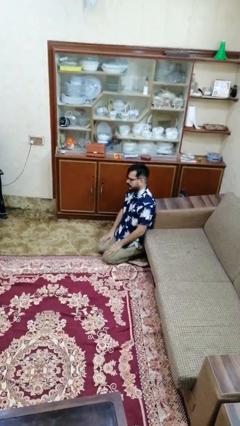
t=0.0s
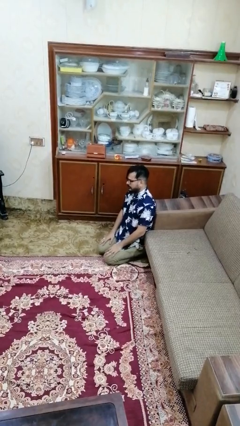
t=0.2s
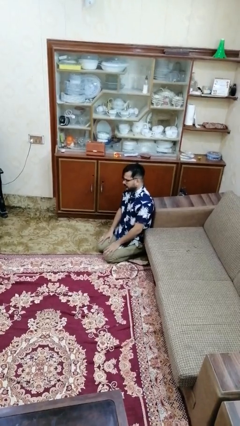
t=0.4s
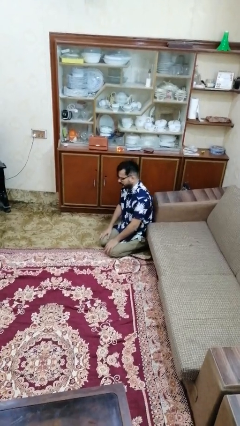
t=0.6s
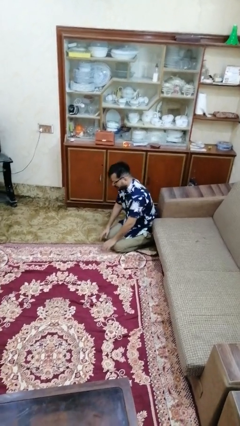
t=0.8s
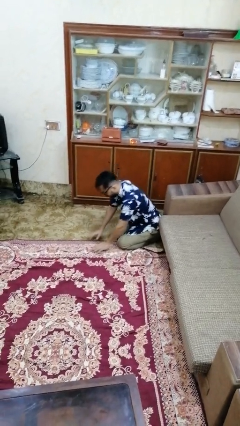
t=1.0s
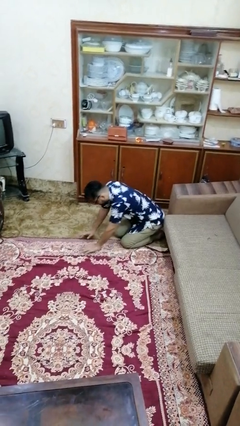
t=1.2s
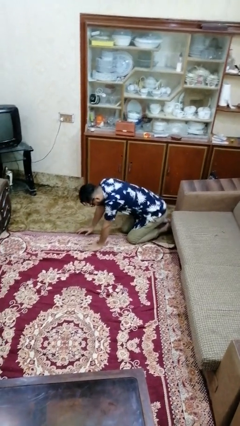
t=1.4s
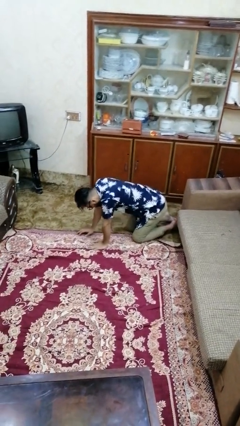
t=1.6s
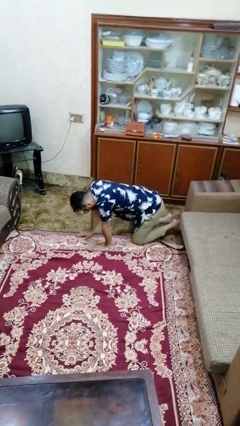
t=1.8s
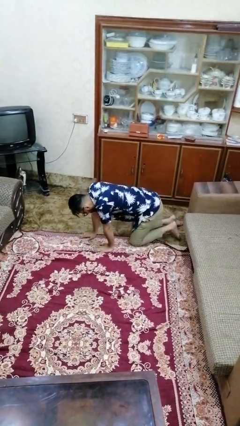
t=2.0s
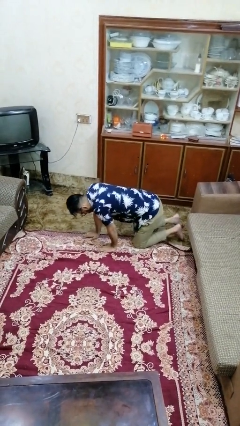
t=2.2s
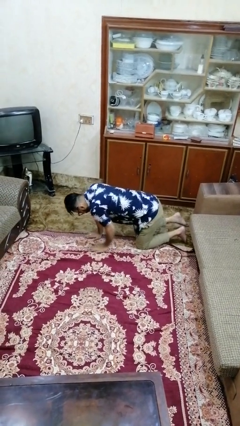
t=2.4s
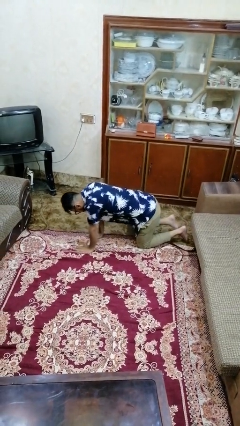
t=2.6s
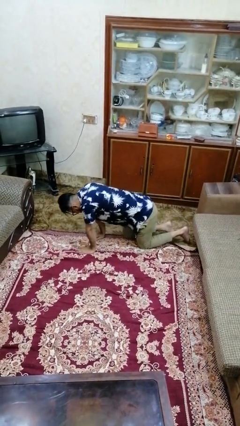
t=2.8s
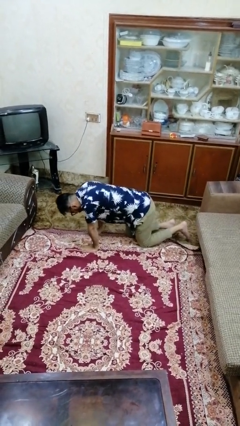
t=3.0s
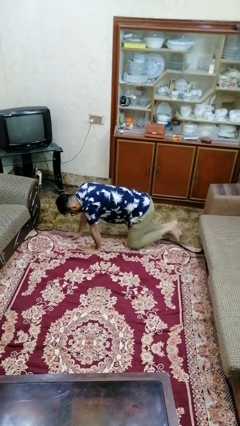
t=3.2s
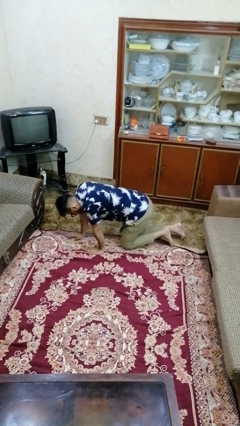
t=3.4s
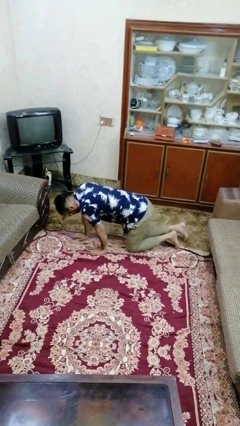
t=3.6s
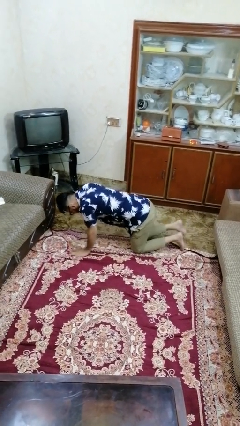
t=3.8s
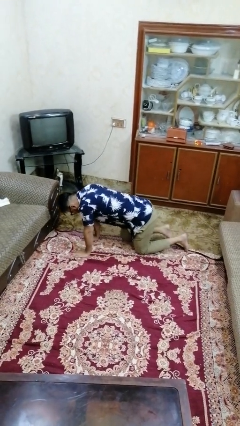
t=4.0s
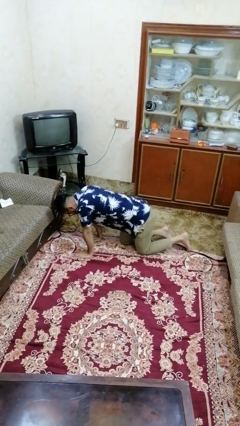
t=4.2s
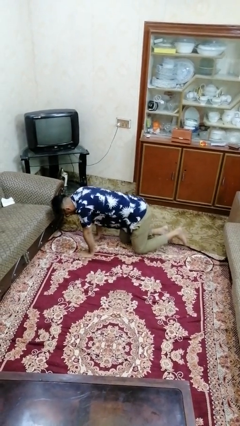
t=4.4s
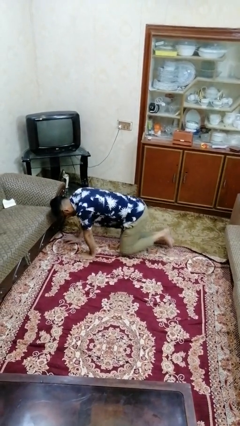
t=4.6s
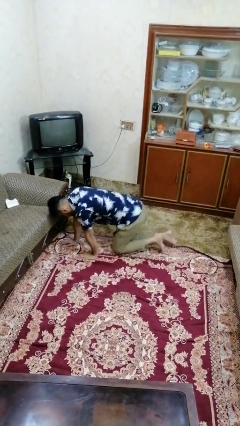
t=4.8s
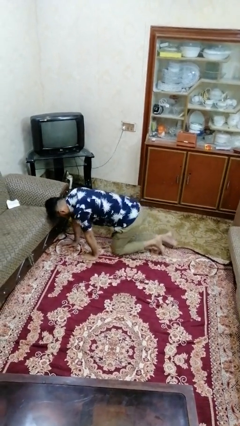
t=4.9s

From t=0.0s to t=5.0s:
person crawls

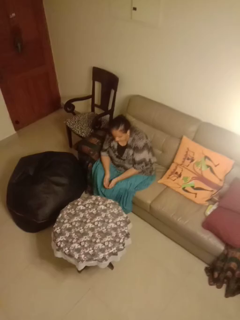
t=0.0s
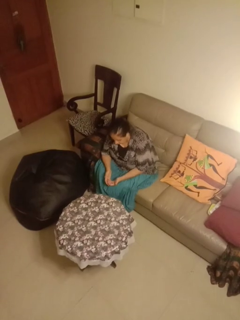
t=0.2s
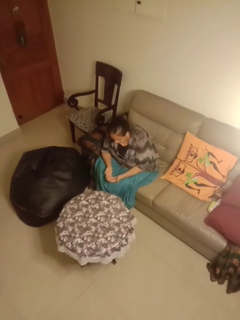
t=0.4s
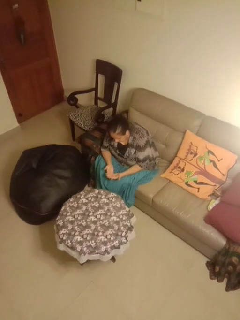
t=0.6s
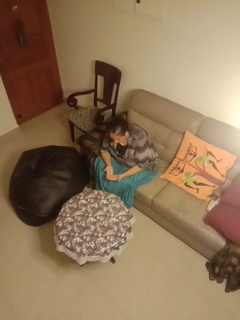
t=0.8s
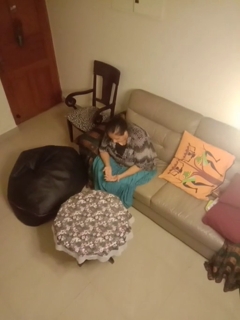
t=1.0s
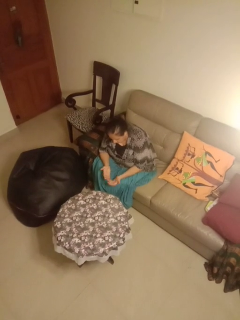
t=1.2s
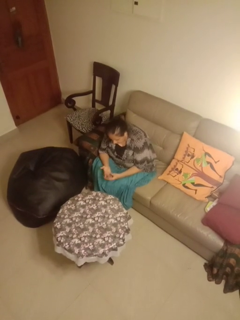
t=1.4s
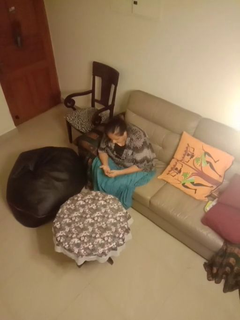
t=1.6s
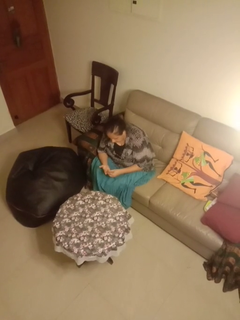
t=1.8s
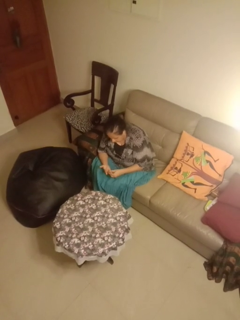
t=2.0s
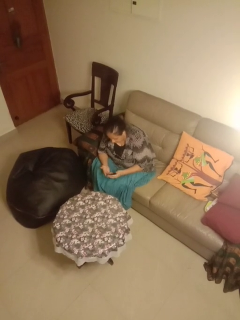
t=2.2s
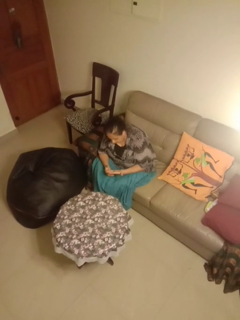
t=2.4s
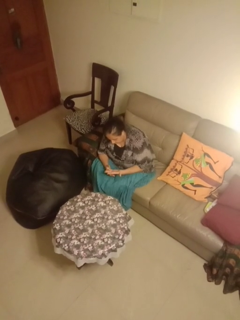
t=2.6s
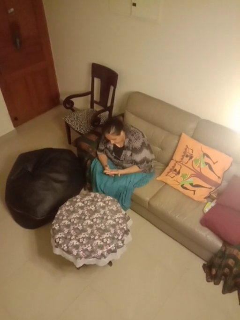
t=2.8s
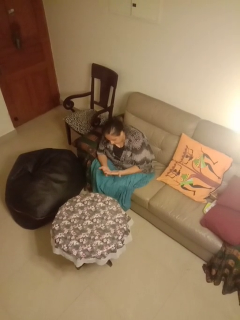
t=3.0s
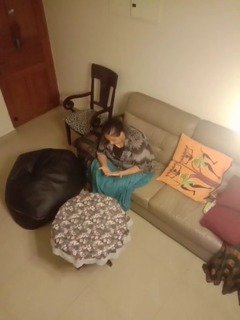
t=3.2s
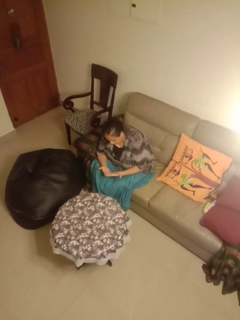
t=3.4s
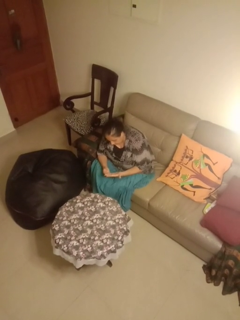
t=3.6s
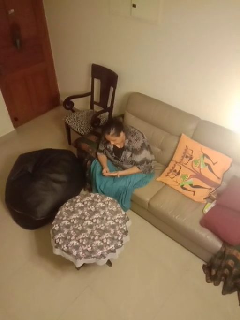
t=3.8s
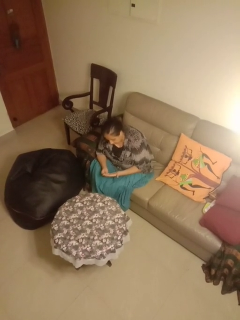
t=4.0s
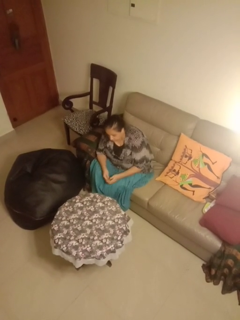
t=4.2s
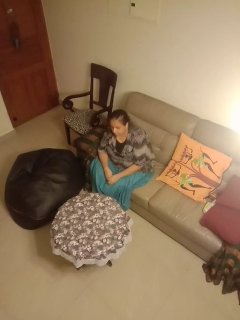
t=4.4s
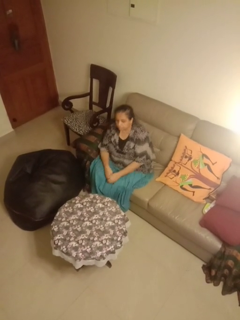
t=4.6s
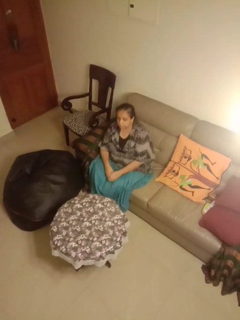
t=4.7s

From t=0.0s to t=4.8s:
person looks at hands in lap

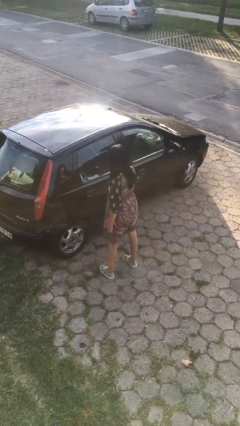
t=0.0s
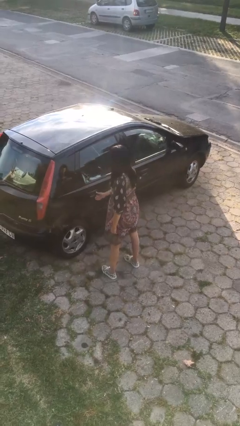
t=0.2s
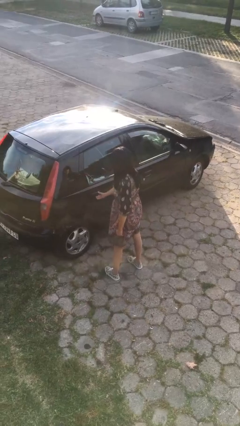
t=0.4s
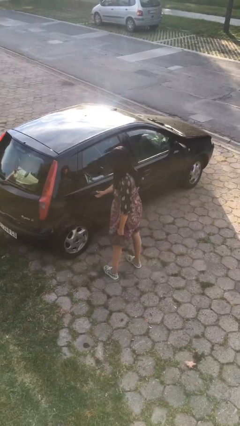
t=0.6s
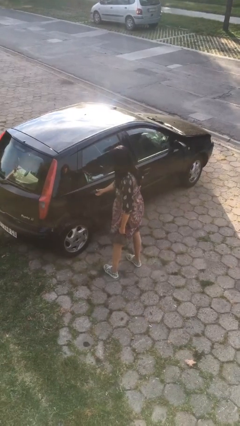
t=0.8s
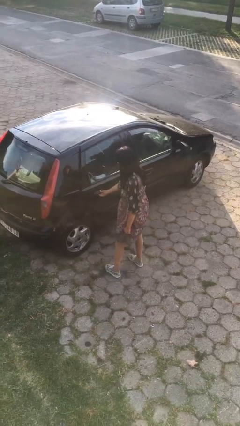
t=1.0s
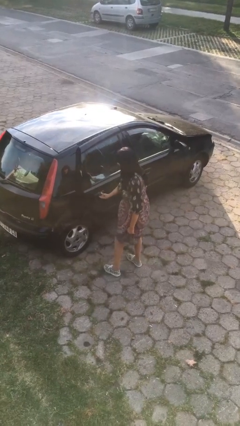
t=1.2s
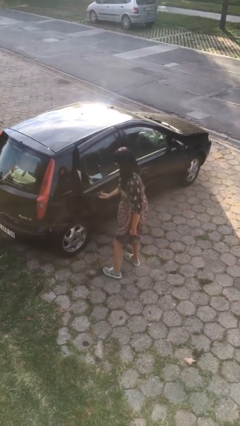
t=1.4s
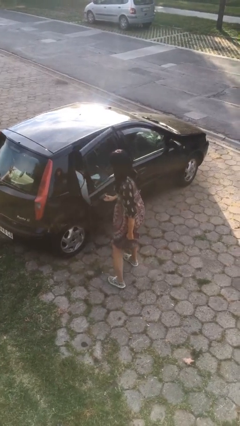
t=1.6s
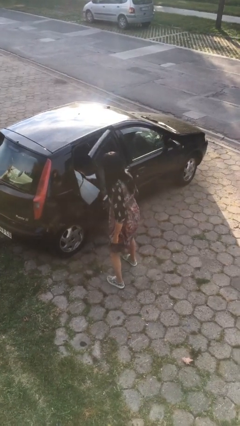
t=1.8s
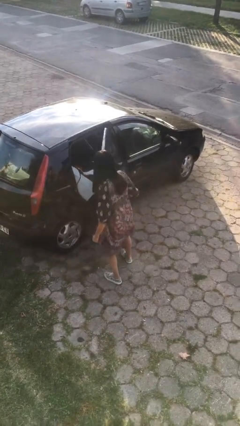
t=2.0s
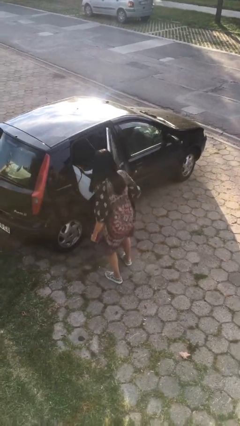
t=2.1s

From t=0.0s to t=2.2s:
person opens car door

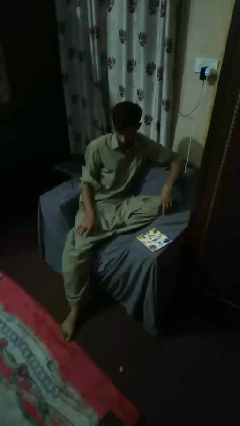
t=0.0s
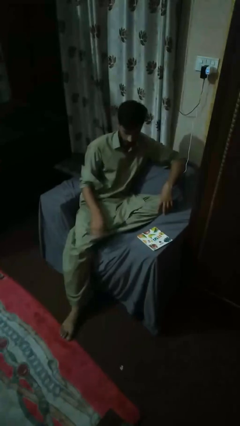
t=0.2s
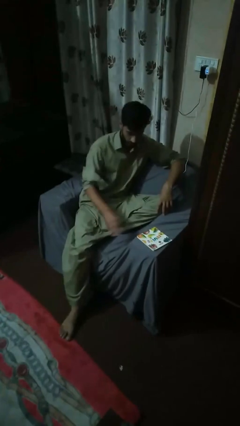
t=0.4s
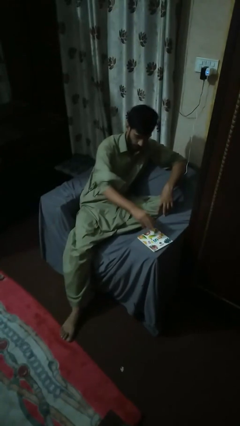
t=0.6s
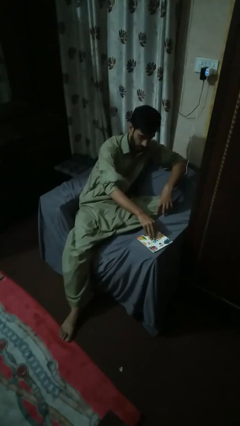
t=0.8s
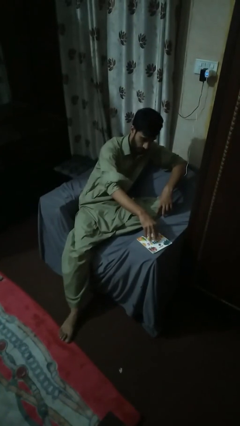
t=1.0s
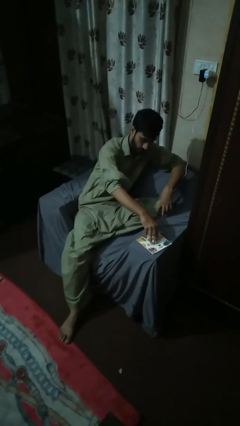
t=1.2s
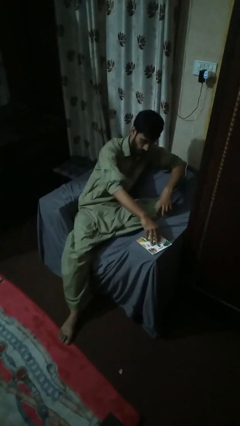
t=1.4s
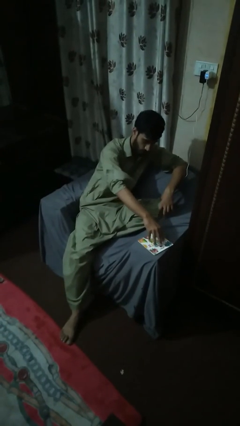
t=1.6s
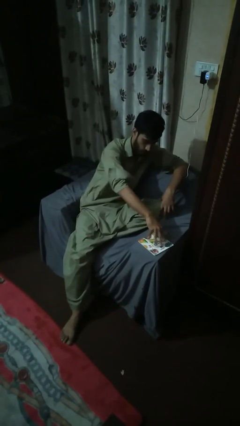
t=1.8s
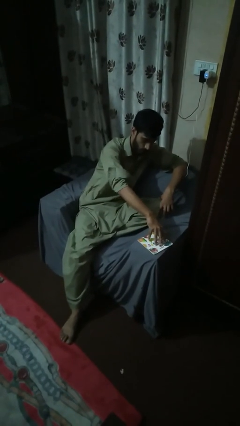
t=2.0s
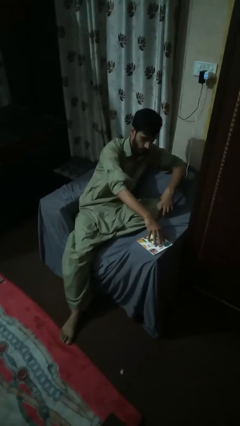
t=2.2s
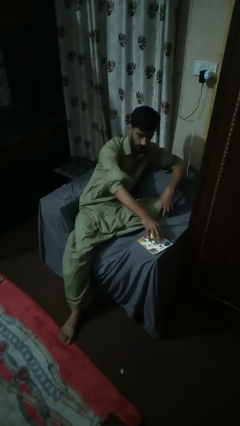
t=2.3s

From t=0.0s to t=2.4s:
person taps object with finger

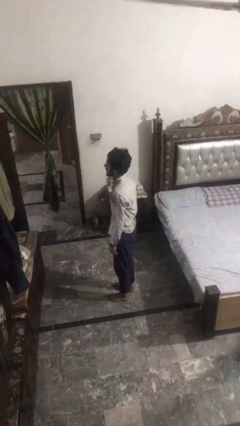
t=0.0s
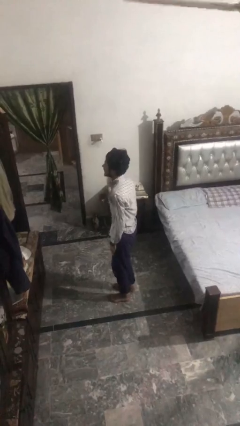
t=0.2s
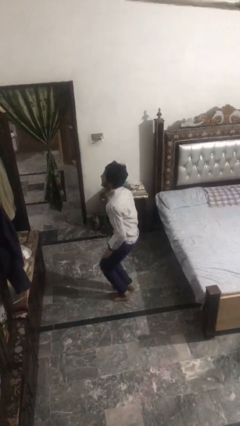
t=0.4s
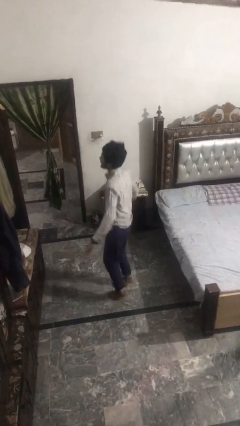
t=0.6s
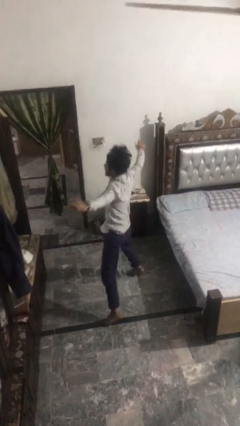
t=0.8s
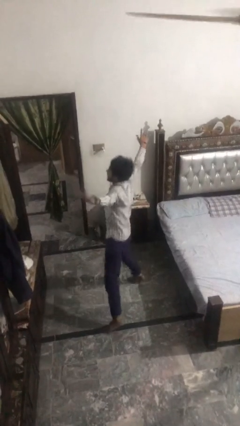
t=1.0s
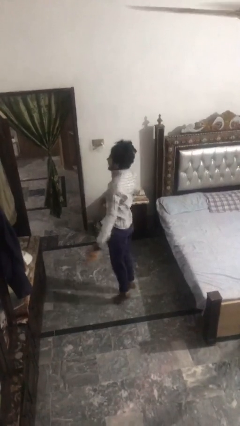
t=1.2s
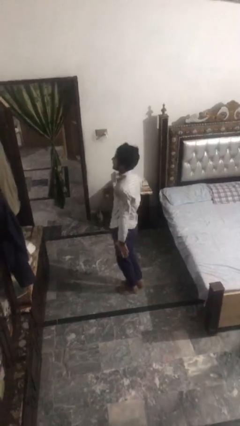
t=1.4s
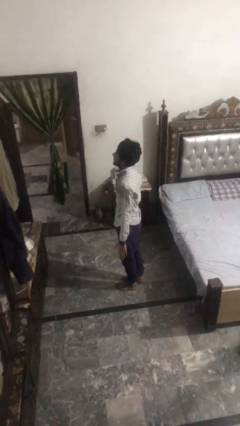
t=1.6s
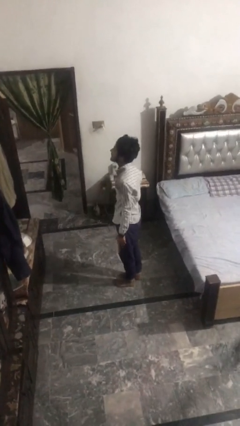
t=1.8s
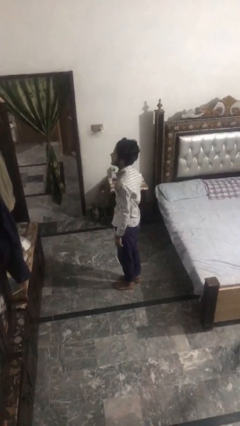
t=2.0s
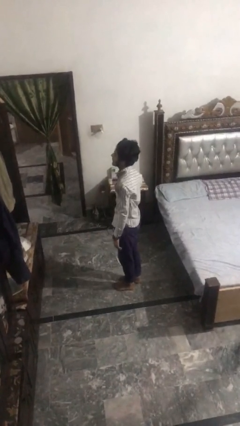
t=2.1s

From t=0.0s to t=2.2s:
person exercises with jumping jacks

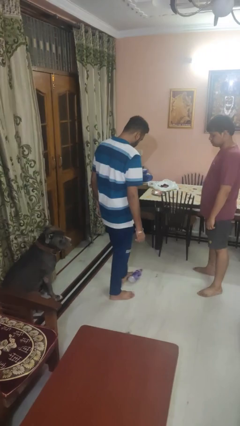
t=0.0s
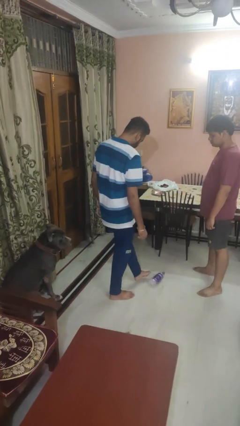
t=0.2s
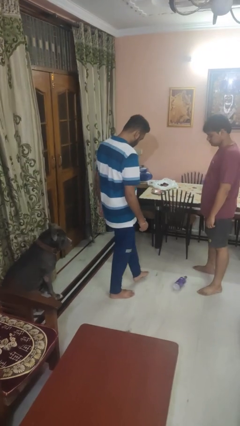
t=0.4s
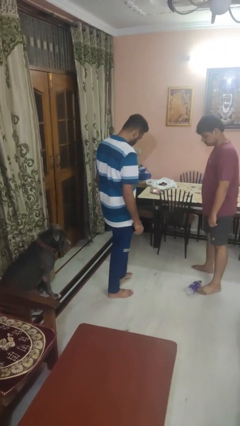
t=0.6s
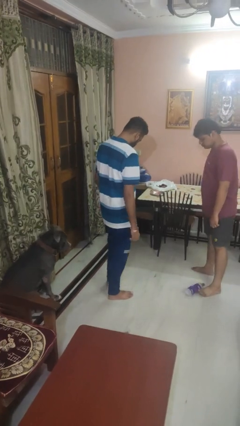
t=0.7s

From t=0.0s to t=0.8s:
person kicks object to person

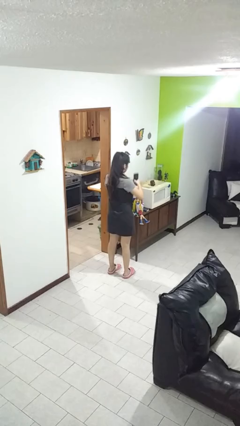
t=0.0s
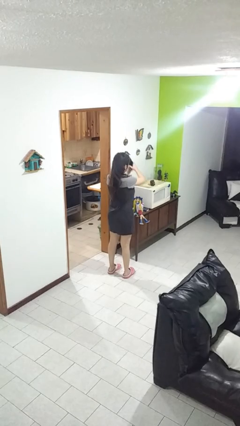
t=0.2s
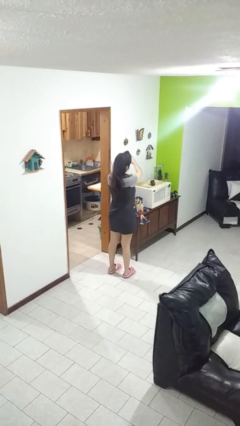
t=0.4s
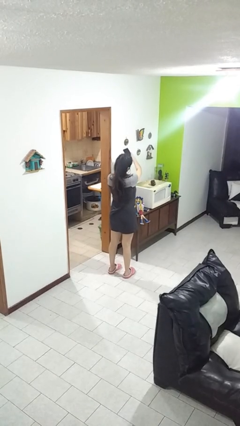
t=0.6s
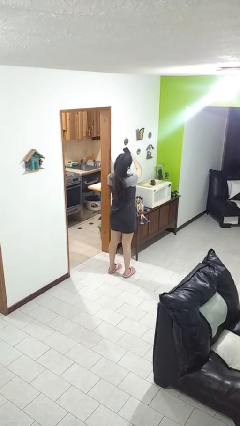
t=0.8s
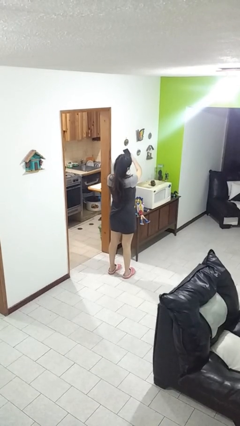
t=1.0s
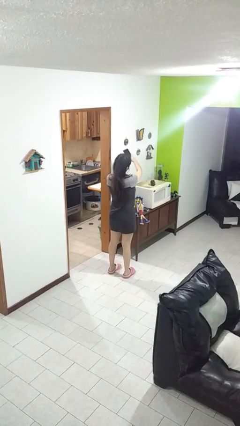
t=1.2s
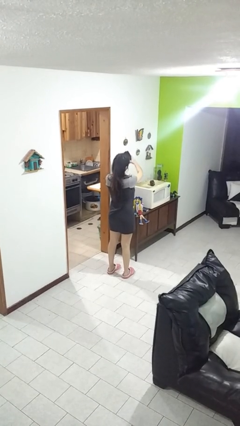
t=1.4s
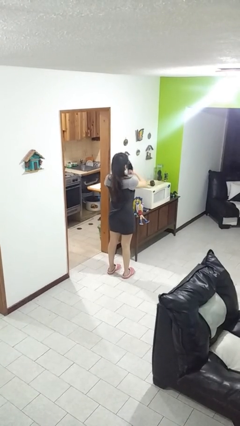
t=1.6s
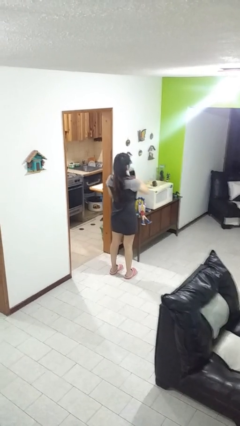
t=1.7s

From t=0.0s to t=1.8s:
person takes selfie
